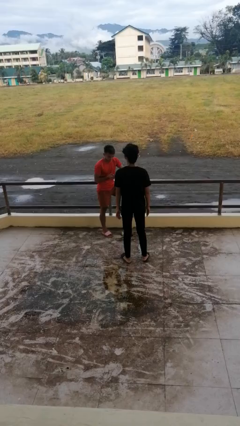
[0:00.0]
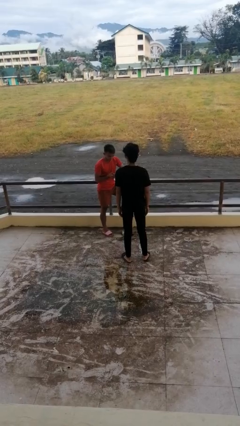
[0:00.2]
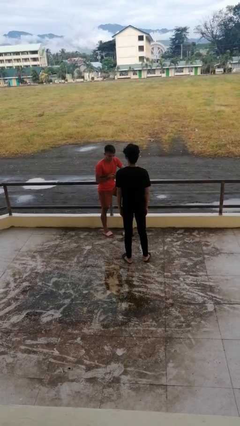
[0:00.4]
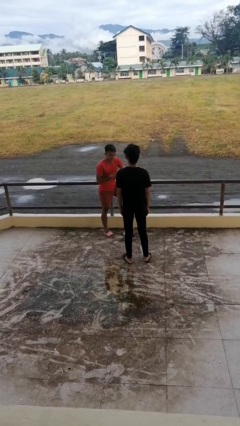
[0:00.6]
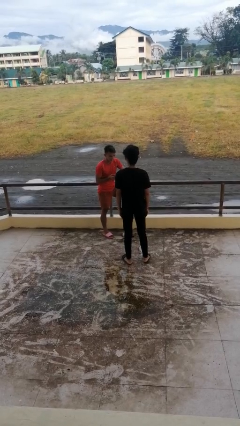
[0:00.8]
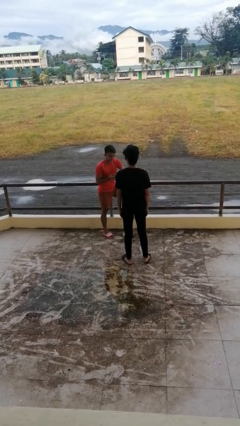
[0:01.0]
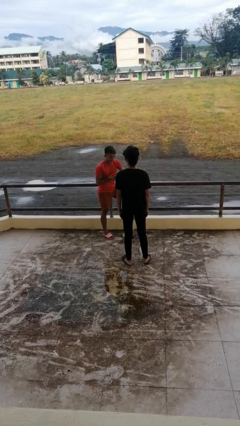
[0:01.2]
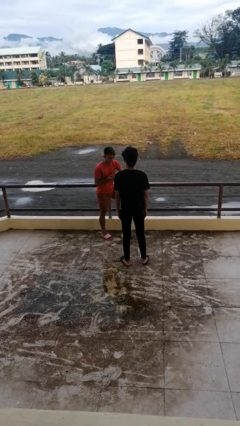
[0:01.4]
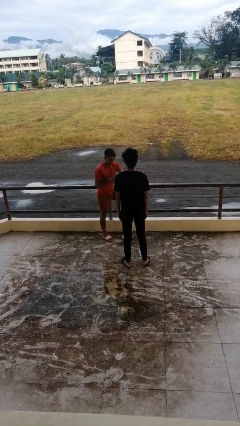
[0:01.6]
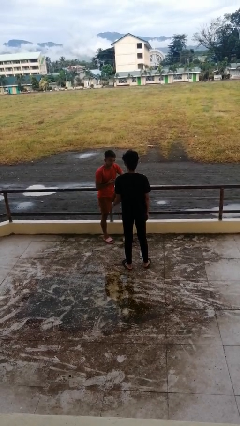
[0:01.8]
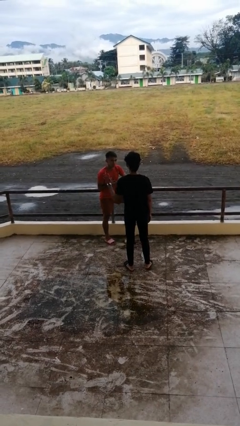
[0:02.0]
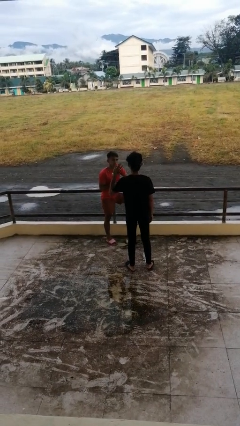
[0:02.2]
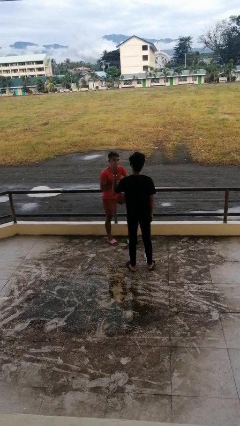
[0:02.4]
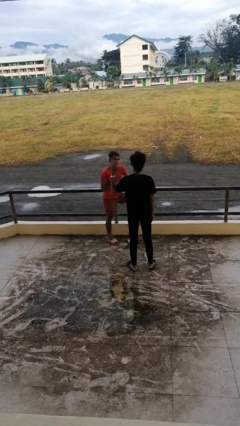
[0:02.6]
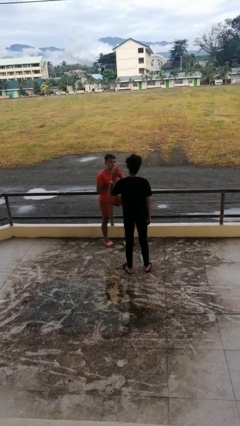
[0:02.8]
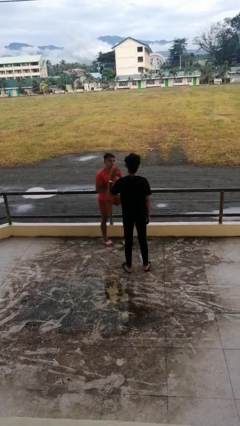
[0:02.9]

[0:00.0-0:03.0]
person waves at person

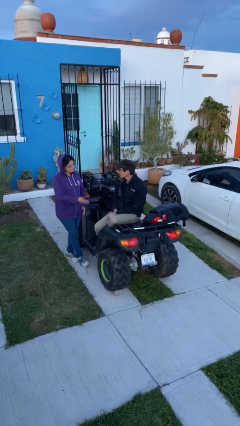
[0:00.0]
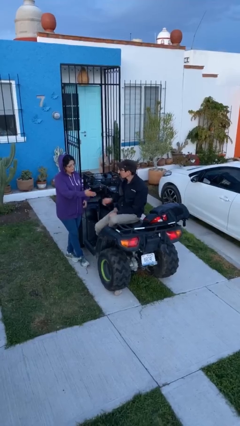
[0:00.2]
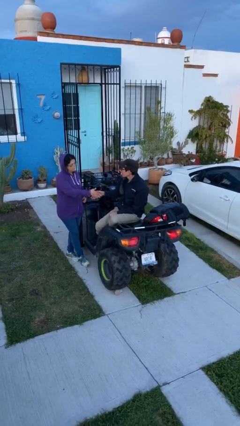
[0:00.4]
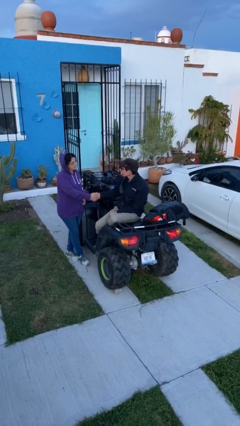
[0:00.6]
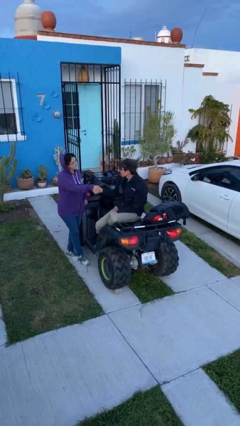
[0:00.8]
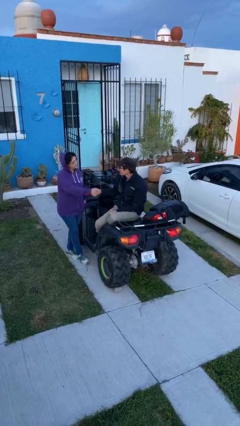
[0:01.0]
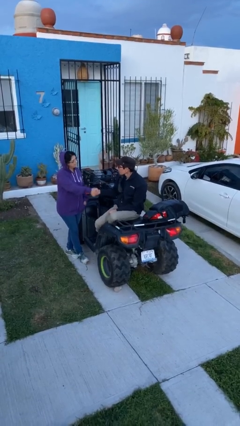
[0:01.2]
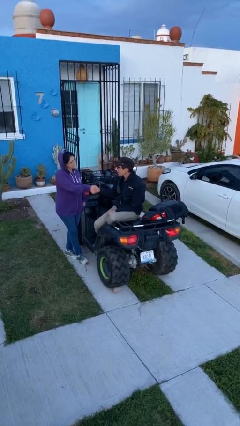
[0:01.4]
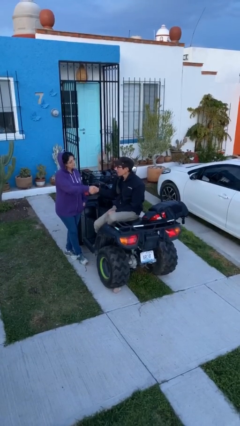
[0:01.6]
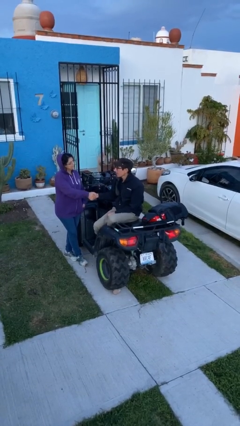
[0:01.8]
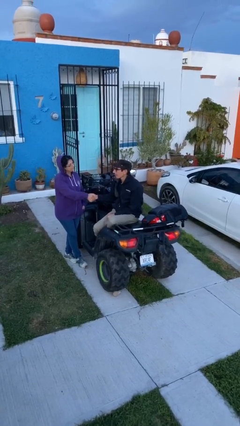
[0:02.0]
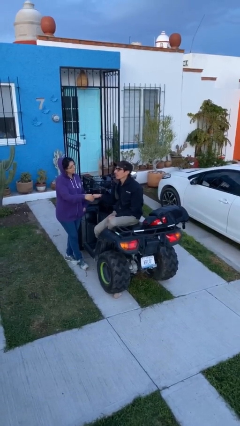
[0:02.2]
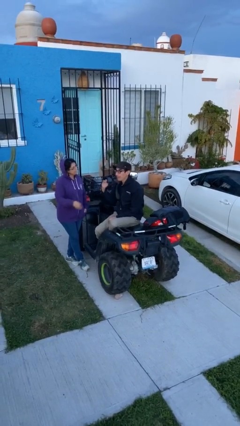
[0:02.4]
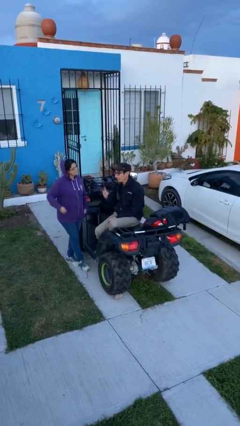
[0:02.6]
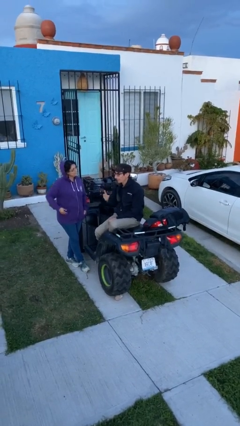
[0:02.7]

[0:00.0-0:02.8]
person shakes hand

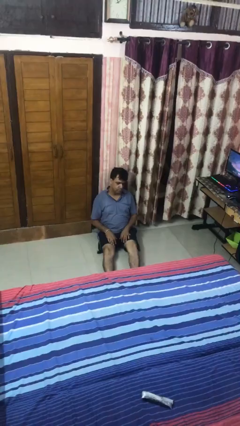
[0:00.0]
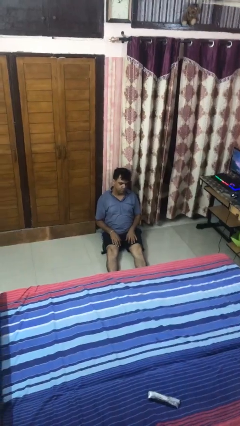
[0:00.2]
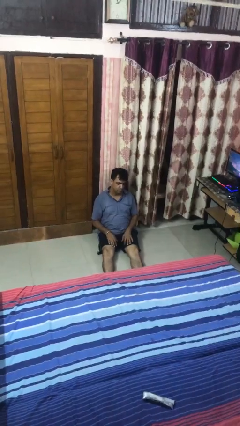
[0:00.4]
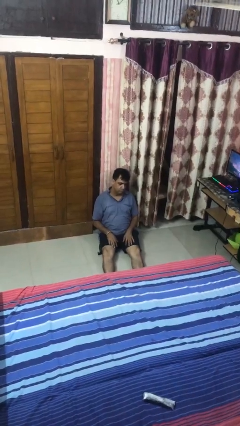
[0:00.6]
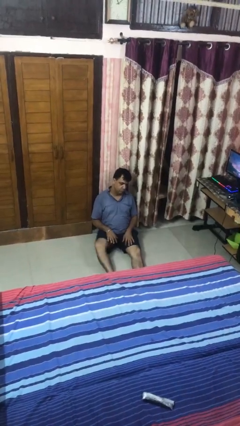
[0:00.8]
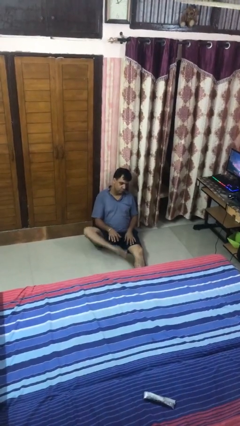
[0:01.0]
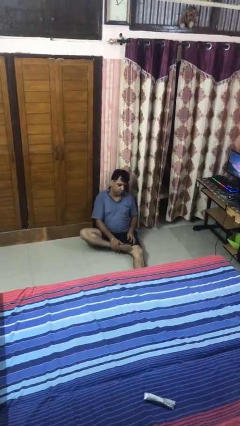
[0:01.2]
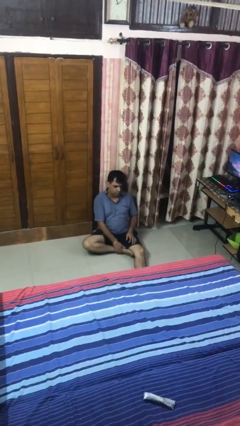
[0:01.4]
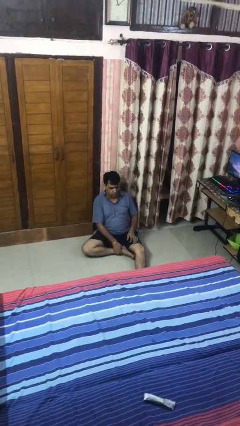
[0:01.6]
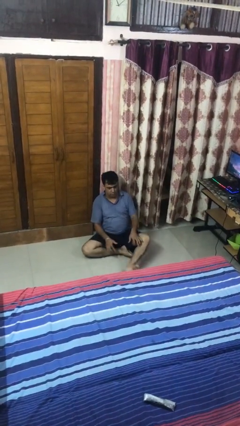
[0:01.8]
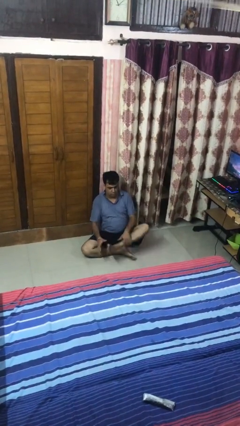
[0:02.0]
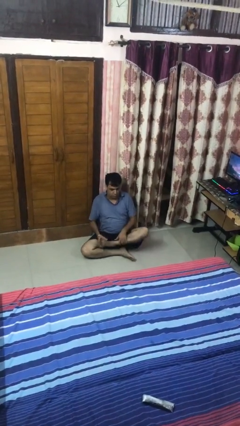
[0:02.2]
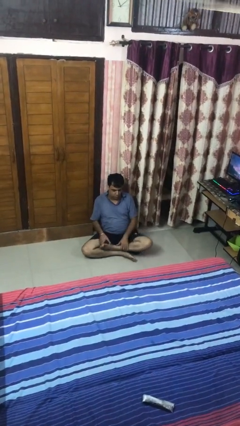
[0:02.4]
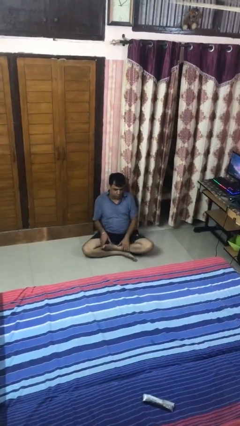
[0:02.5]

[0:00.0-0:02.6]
person crosses legs

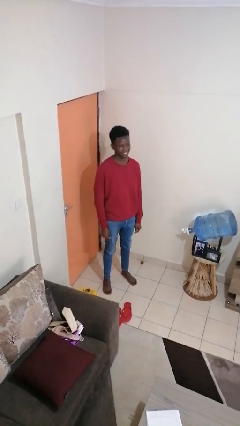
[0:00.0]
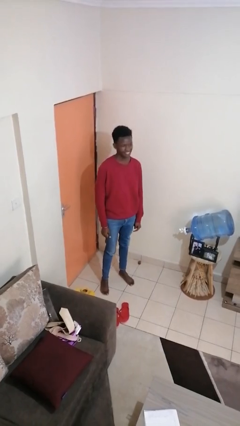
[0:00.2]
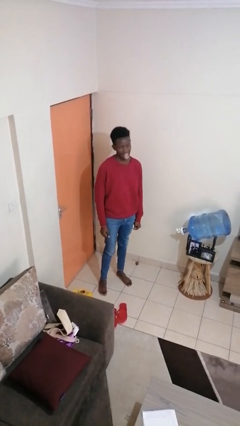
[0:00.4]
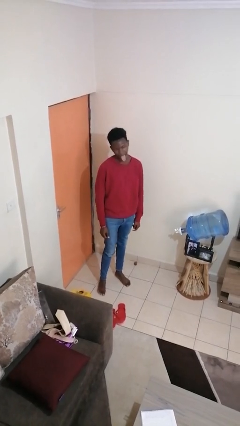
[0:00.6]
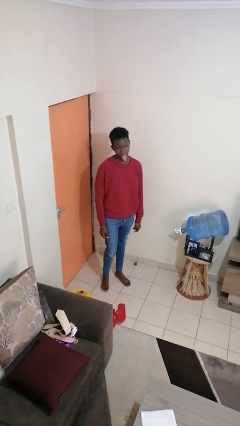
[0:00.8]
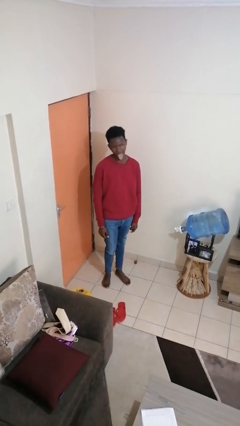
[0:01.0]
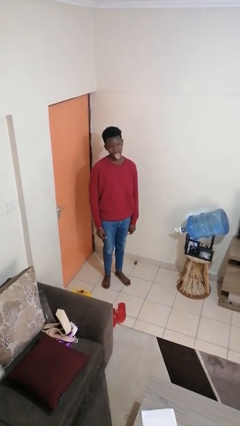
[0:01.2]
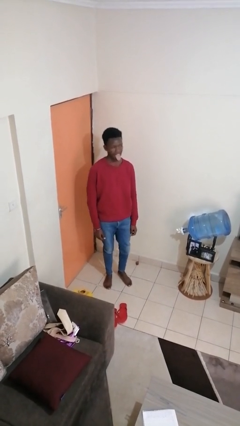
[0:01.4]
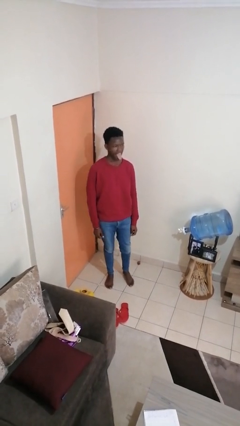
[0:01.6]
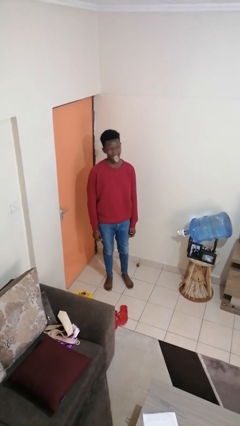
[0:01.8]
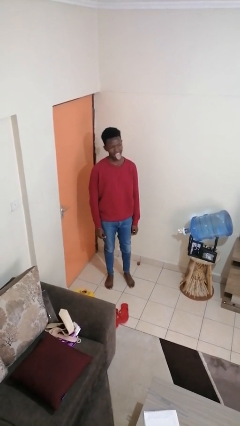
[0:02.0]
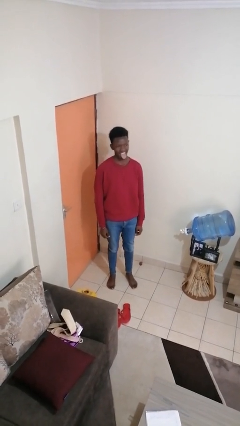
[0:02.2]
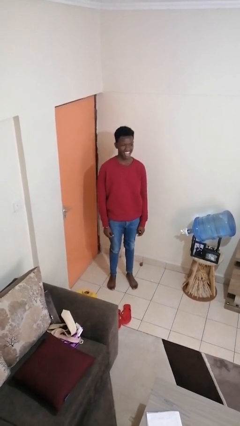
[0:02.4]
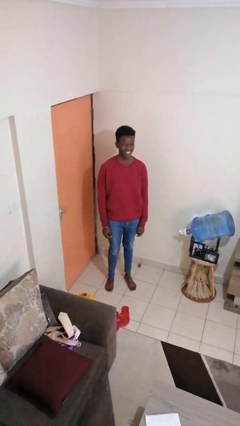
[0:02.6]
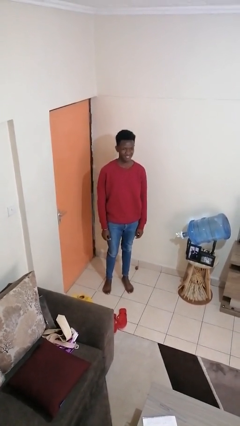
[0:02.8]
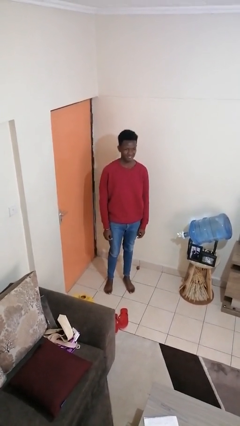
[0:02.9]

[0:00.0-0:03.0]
person sticks out tongue

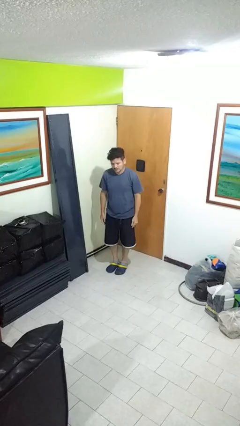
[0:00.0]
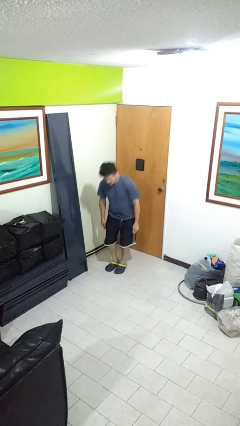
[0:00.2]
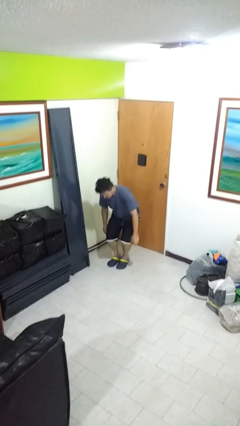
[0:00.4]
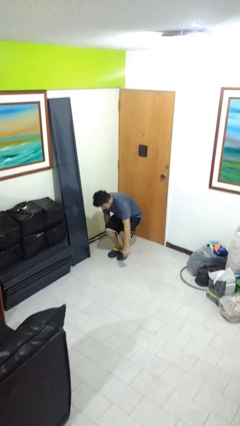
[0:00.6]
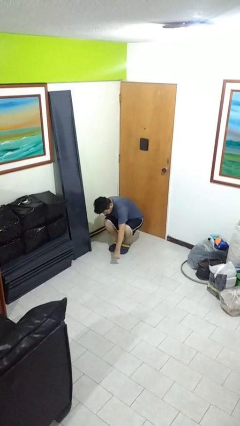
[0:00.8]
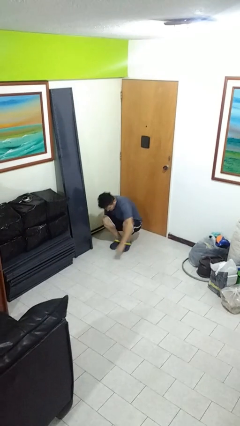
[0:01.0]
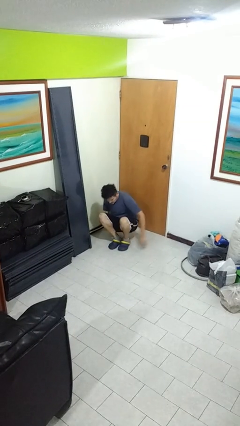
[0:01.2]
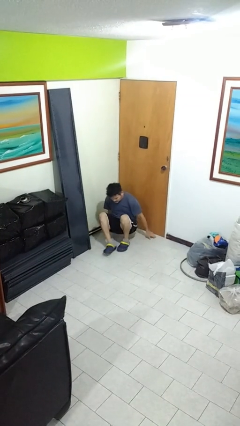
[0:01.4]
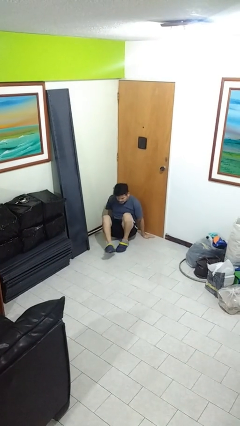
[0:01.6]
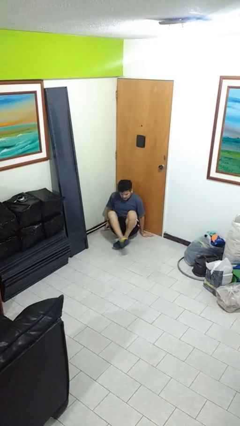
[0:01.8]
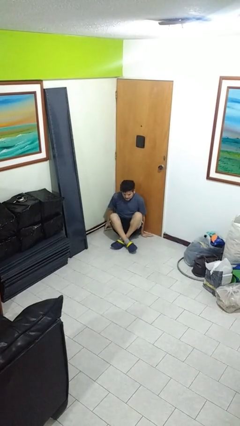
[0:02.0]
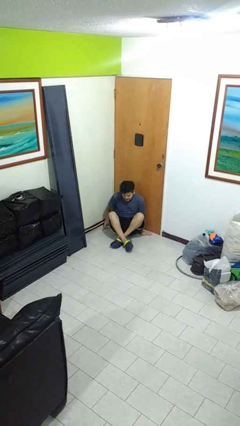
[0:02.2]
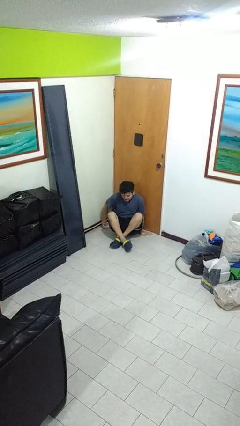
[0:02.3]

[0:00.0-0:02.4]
person sits crisscross

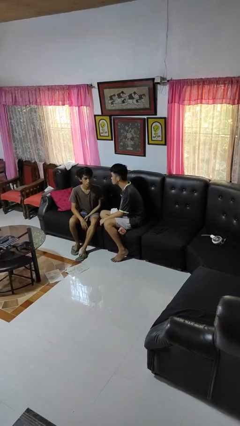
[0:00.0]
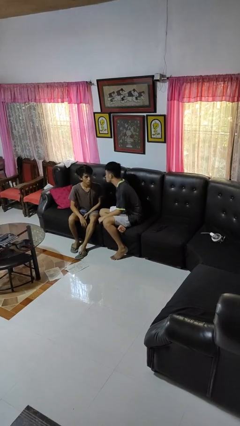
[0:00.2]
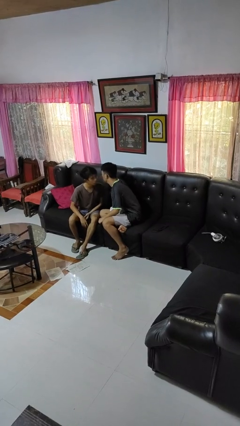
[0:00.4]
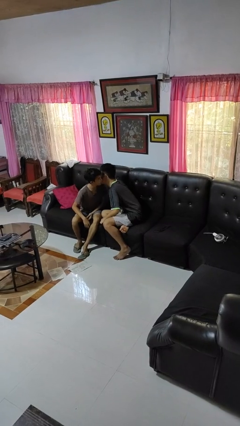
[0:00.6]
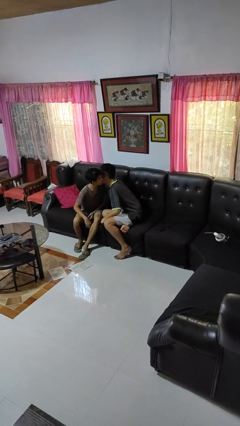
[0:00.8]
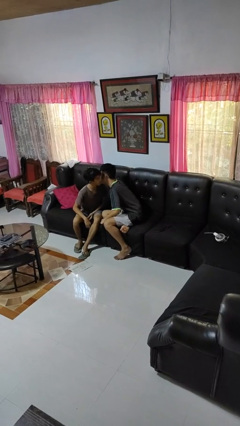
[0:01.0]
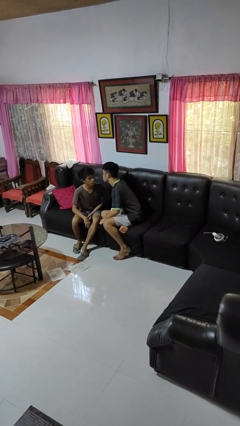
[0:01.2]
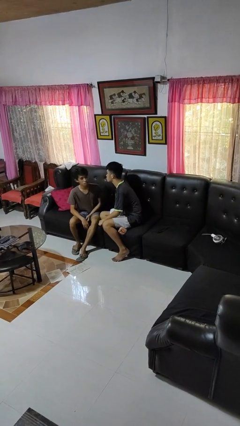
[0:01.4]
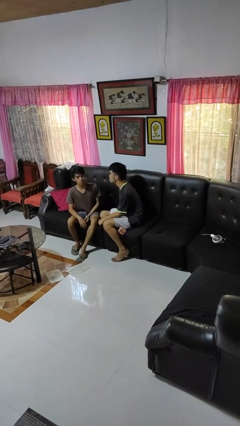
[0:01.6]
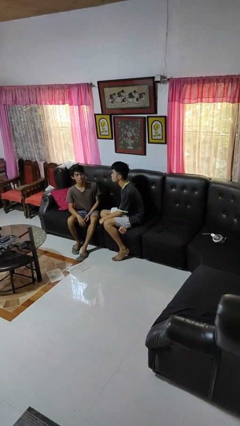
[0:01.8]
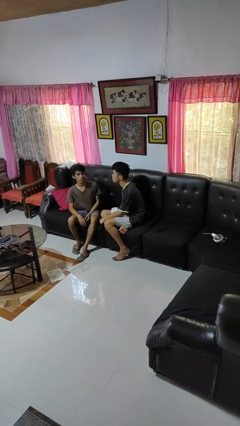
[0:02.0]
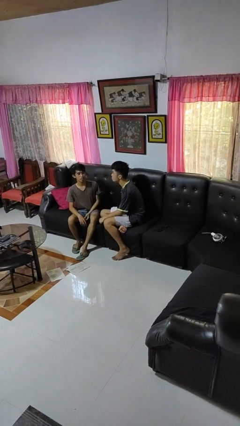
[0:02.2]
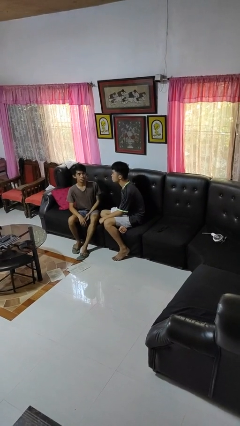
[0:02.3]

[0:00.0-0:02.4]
person kisses cheek of person

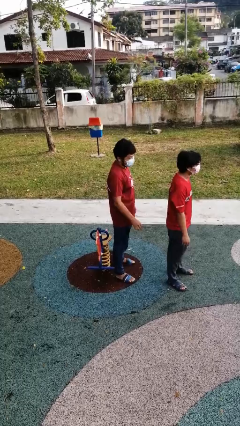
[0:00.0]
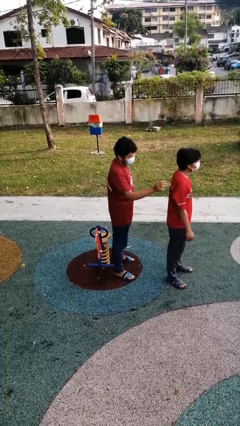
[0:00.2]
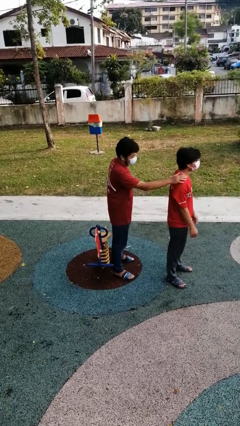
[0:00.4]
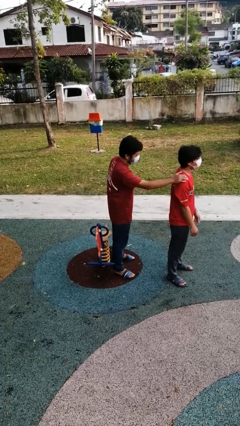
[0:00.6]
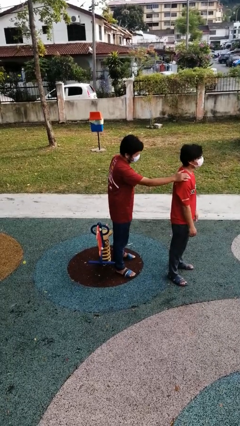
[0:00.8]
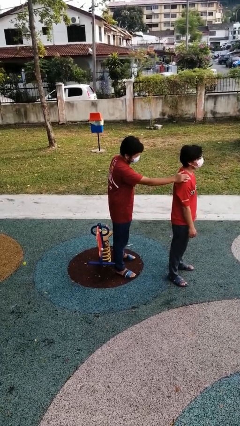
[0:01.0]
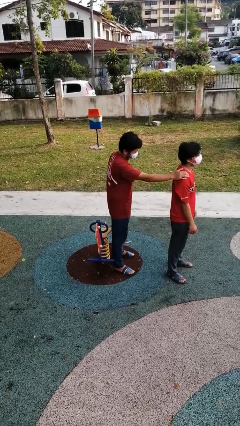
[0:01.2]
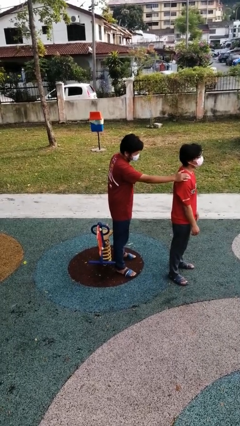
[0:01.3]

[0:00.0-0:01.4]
person grabs person by shoulder
